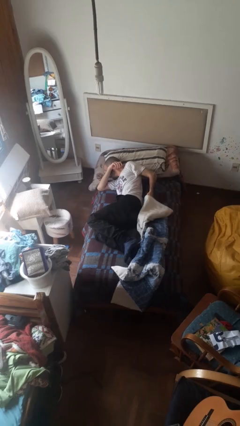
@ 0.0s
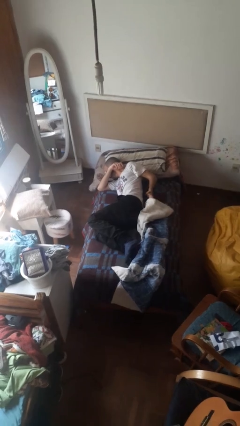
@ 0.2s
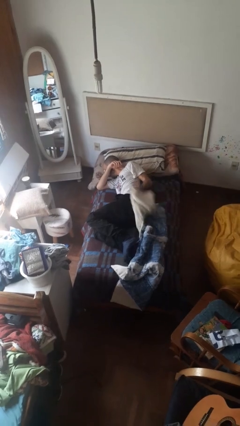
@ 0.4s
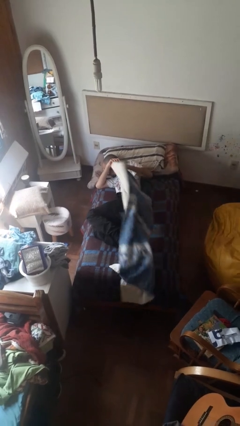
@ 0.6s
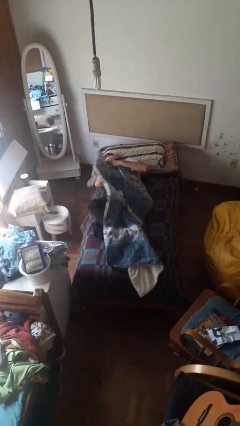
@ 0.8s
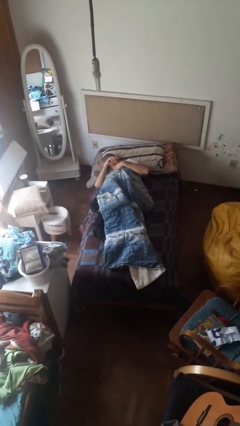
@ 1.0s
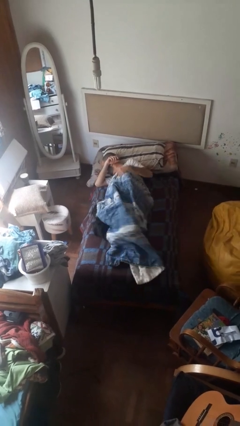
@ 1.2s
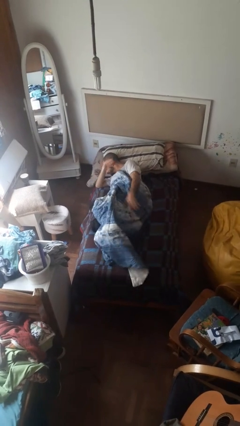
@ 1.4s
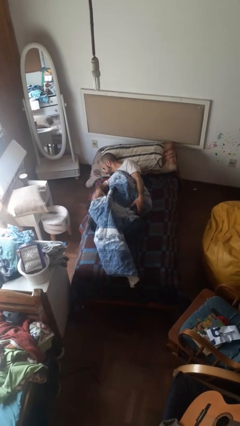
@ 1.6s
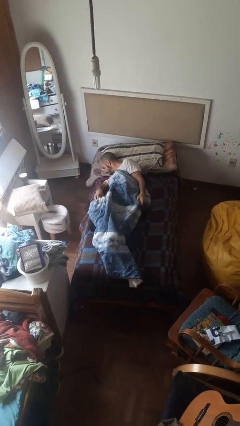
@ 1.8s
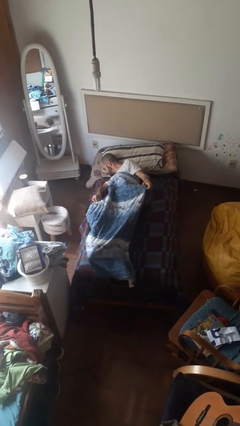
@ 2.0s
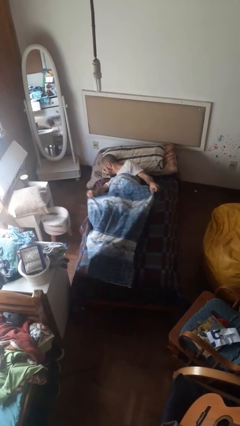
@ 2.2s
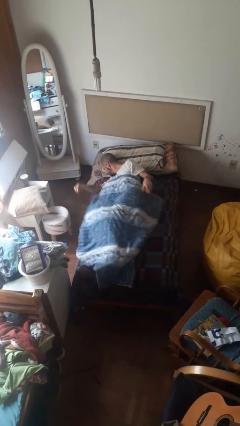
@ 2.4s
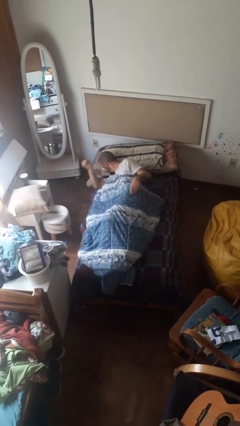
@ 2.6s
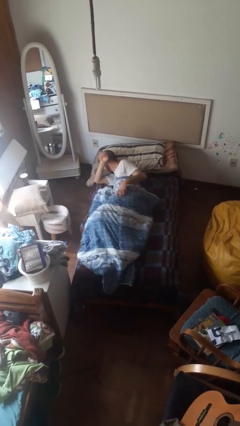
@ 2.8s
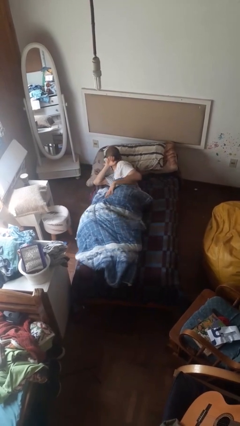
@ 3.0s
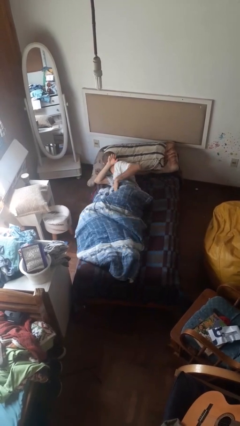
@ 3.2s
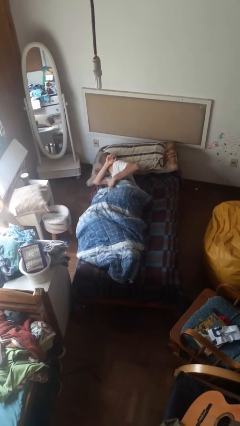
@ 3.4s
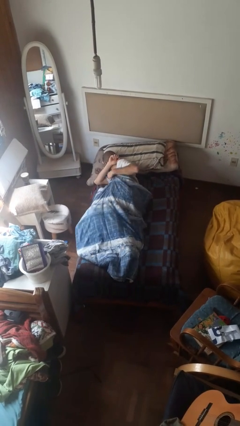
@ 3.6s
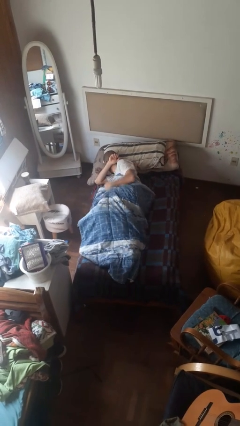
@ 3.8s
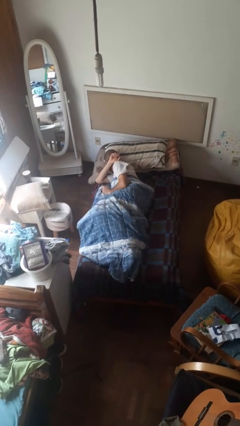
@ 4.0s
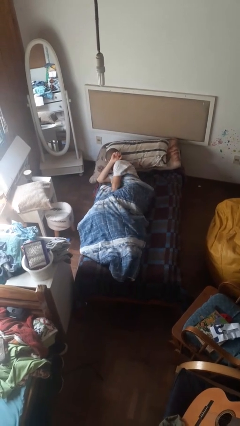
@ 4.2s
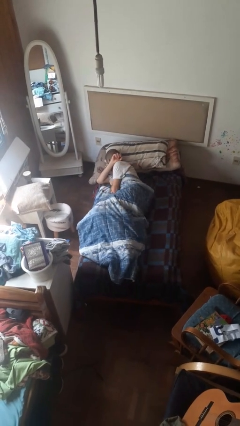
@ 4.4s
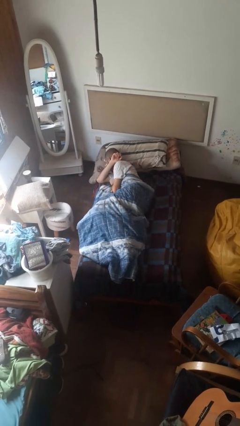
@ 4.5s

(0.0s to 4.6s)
person covers with bedsheets

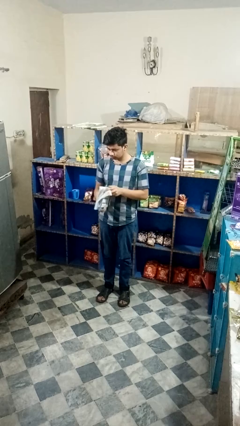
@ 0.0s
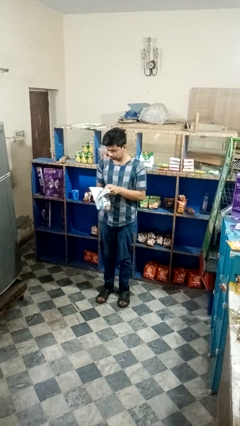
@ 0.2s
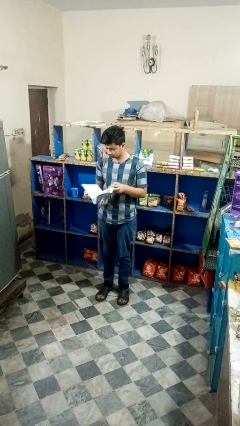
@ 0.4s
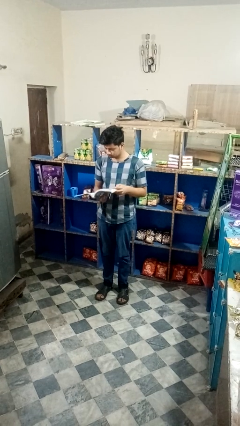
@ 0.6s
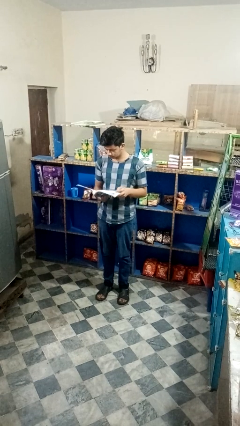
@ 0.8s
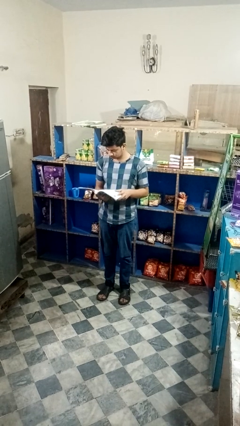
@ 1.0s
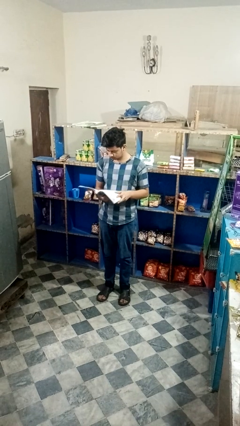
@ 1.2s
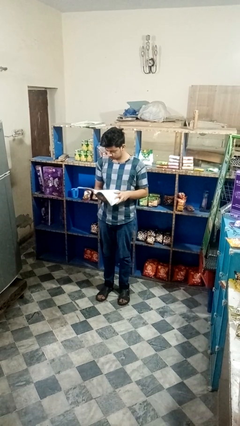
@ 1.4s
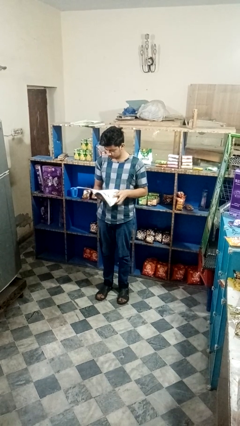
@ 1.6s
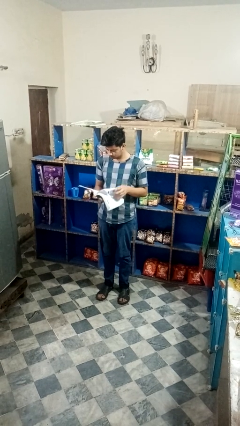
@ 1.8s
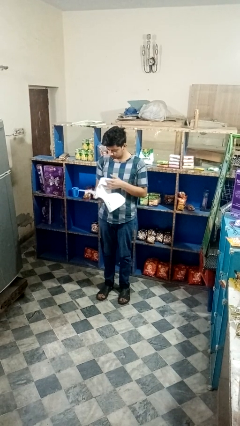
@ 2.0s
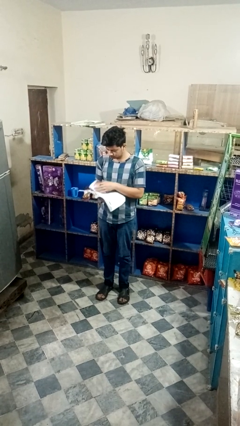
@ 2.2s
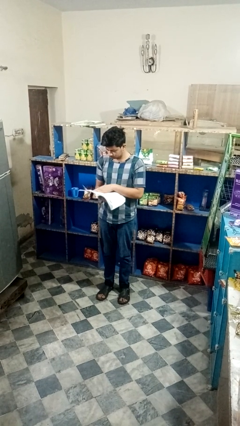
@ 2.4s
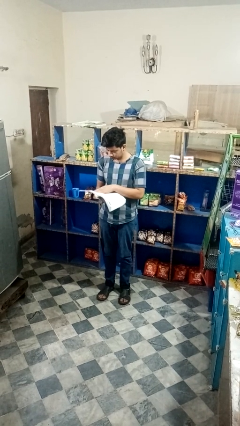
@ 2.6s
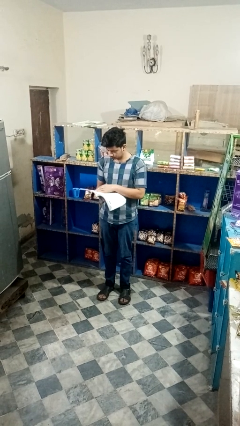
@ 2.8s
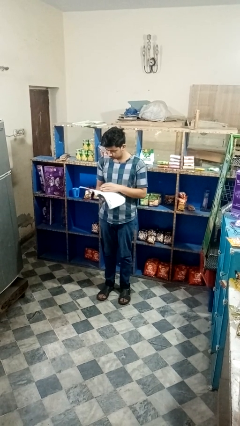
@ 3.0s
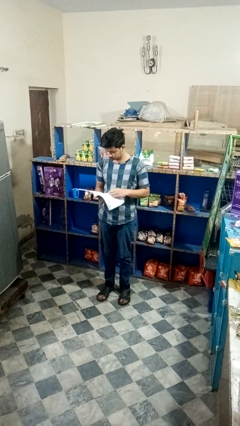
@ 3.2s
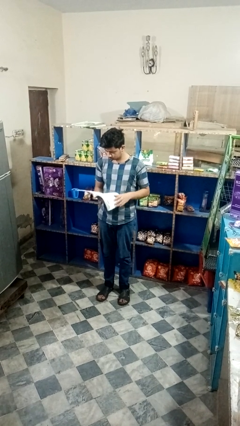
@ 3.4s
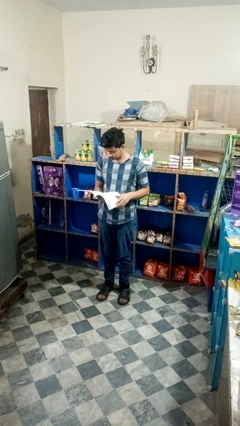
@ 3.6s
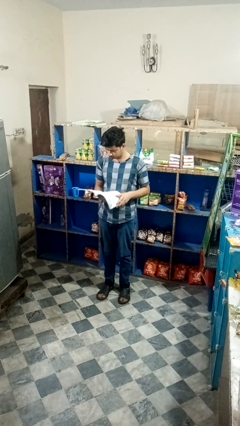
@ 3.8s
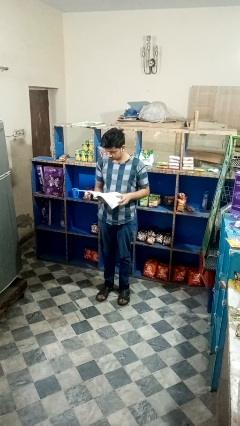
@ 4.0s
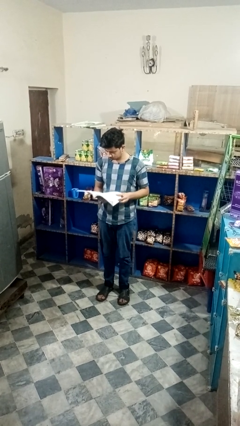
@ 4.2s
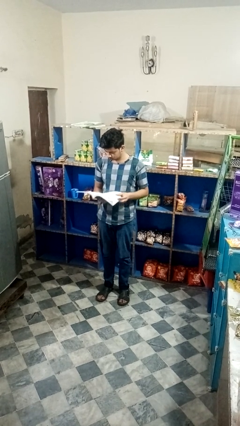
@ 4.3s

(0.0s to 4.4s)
person reads book

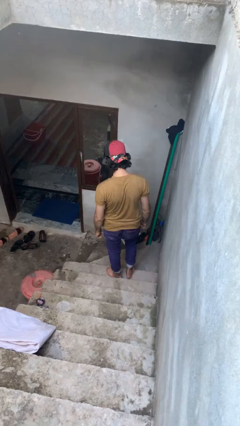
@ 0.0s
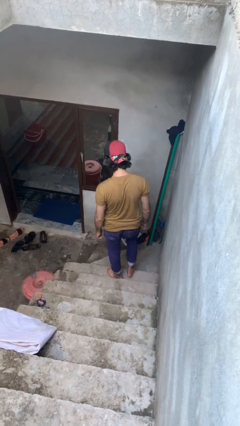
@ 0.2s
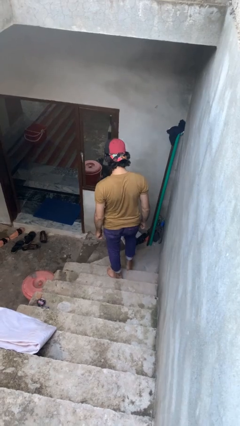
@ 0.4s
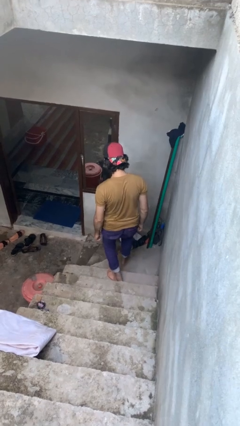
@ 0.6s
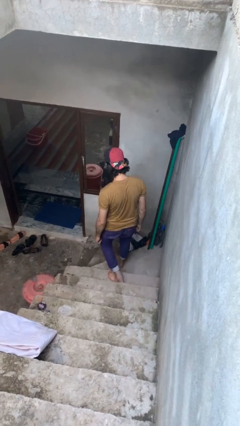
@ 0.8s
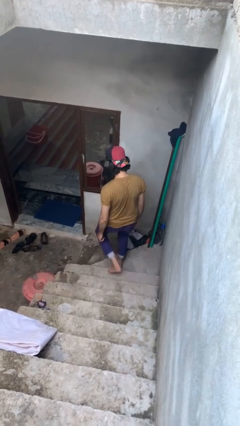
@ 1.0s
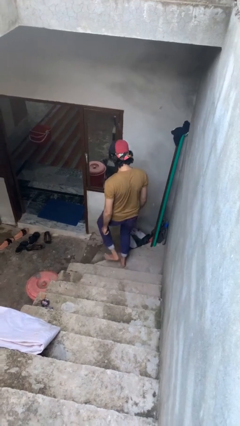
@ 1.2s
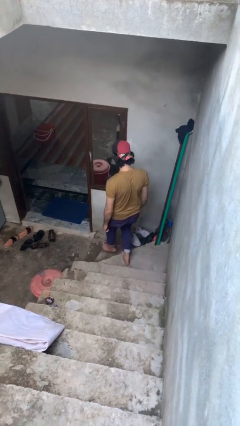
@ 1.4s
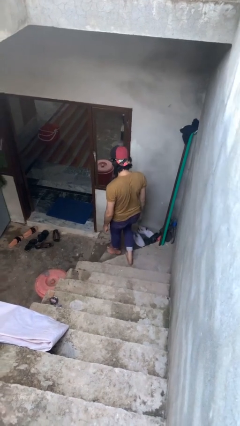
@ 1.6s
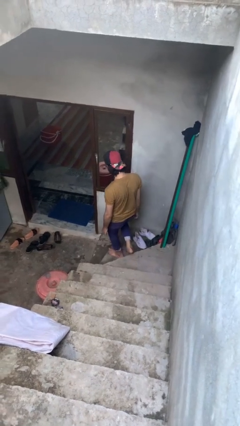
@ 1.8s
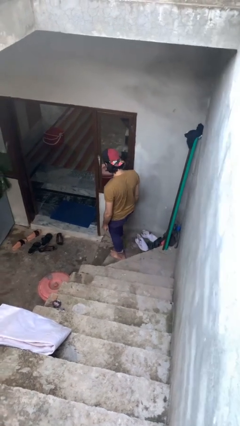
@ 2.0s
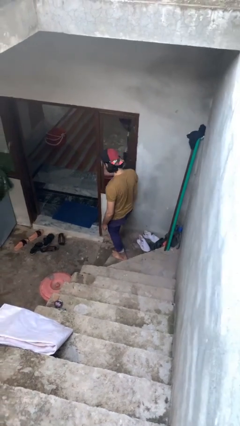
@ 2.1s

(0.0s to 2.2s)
person climbs down stairs

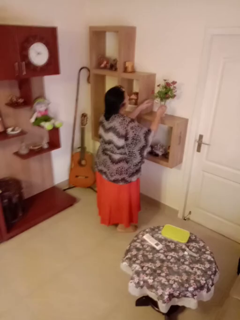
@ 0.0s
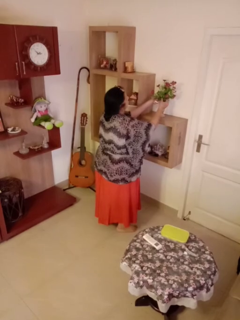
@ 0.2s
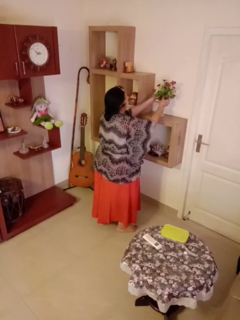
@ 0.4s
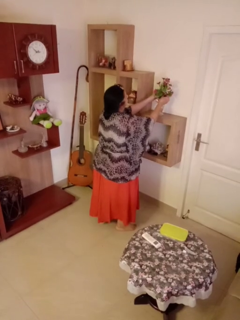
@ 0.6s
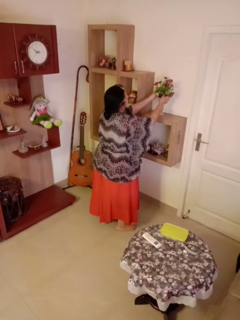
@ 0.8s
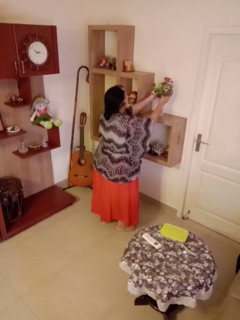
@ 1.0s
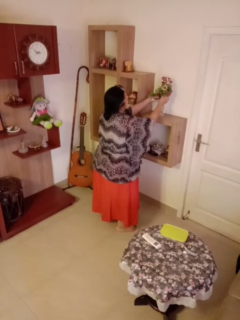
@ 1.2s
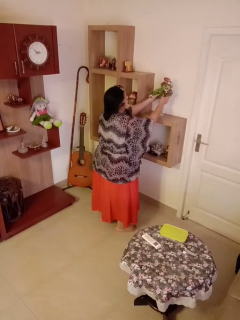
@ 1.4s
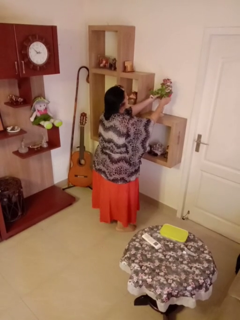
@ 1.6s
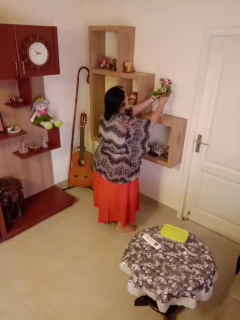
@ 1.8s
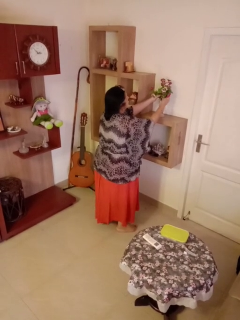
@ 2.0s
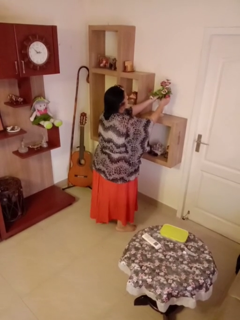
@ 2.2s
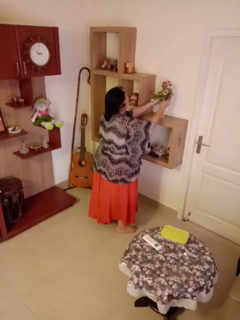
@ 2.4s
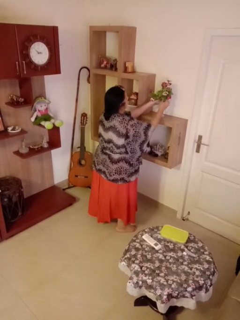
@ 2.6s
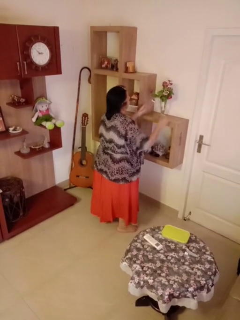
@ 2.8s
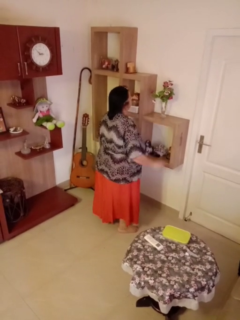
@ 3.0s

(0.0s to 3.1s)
person arranges flowers in vase

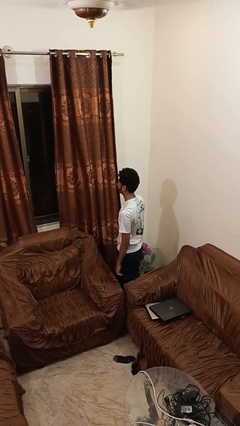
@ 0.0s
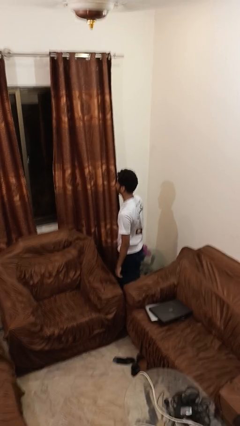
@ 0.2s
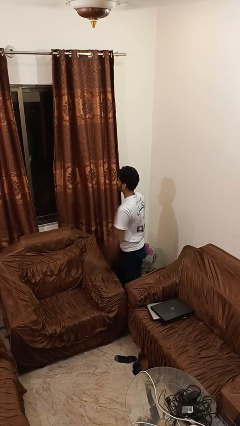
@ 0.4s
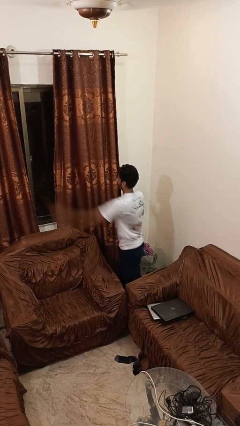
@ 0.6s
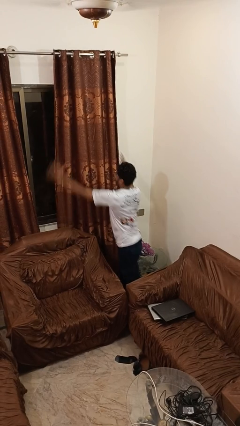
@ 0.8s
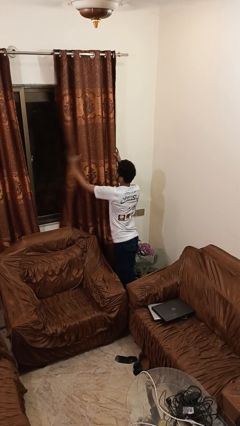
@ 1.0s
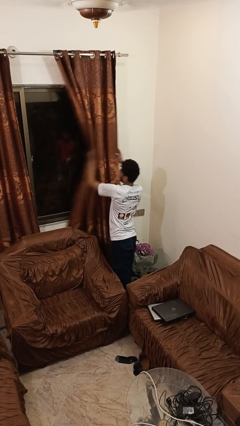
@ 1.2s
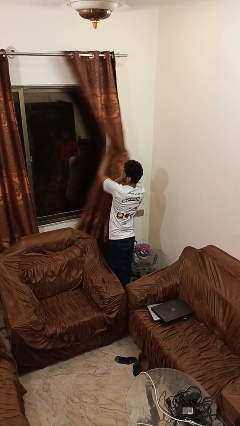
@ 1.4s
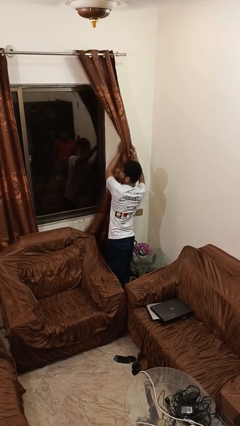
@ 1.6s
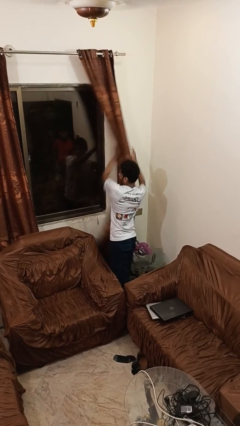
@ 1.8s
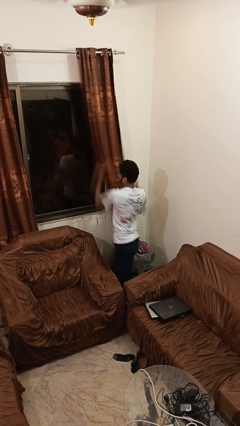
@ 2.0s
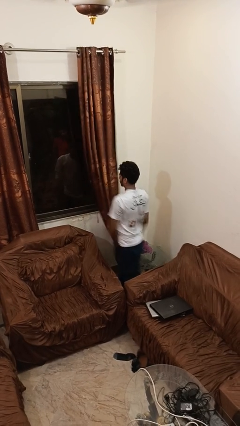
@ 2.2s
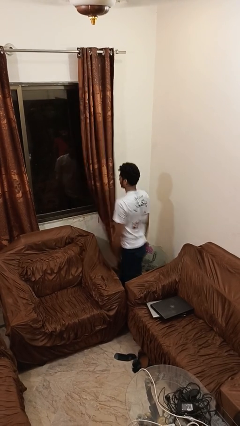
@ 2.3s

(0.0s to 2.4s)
person opens curtains

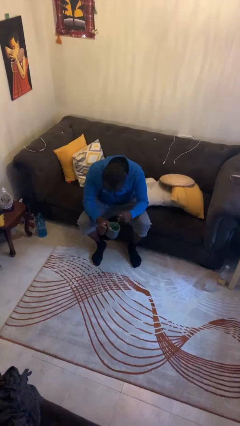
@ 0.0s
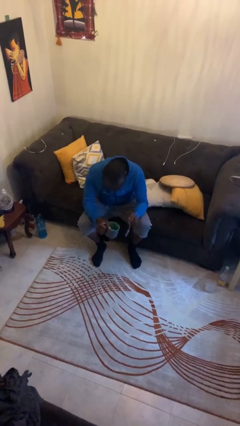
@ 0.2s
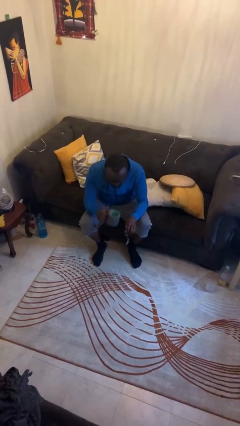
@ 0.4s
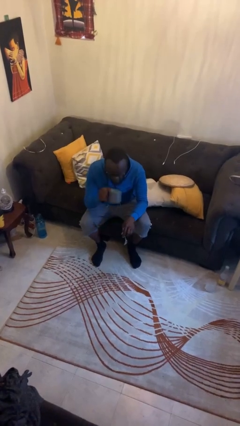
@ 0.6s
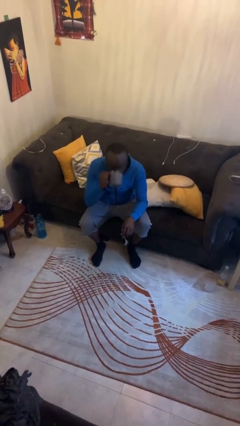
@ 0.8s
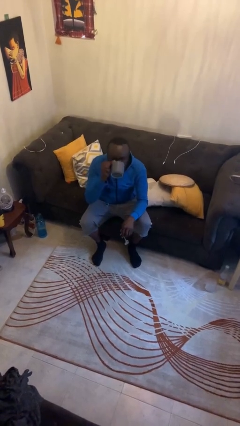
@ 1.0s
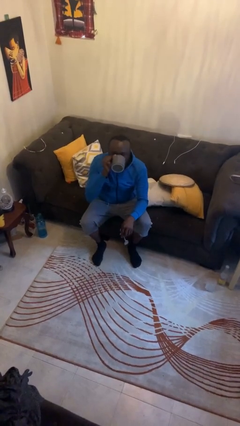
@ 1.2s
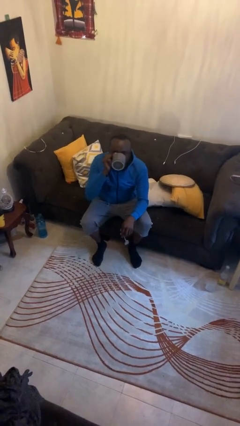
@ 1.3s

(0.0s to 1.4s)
person drinks from mug
